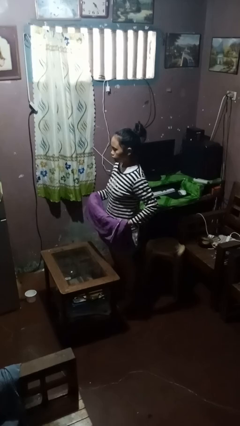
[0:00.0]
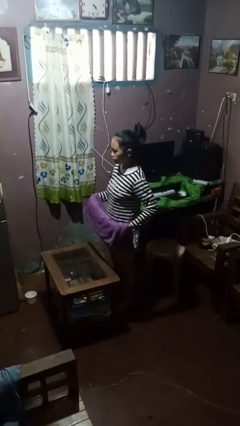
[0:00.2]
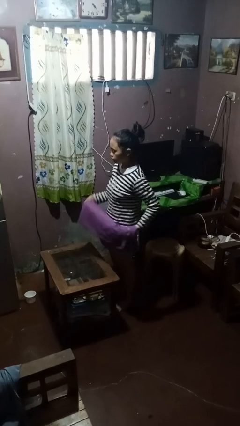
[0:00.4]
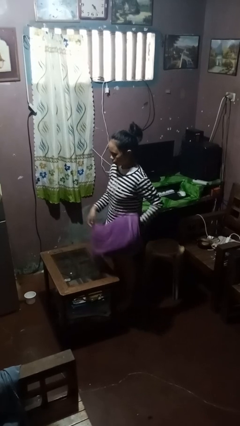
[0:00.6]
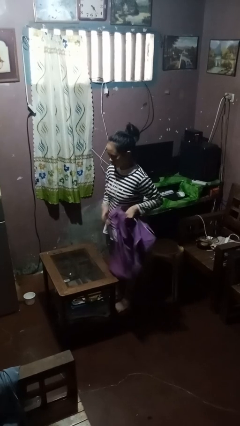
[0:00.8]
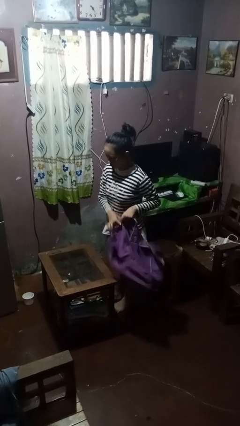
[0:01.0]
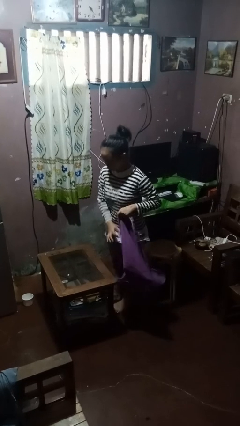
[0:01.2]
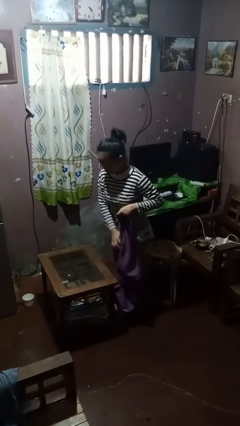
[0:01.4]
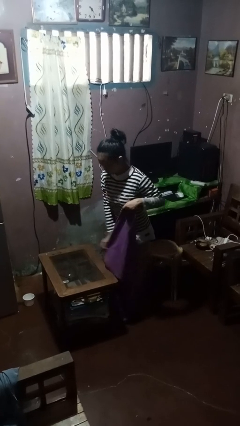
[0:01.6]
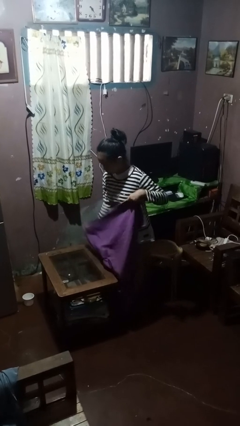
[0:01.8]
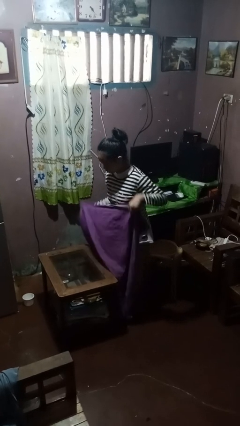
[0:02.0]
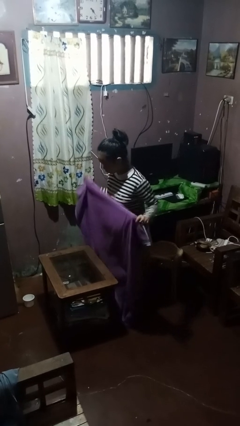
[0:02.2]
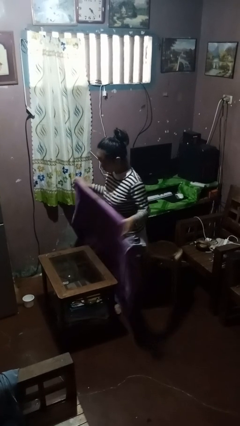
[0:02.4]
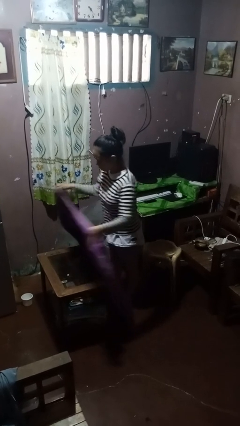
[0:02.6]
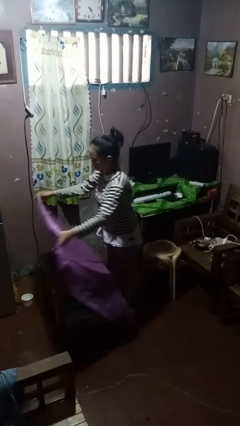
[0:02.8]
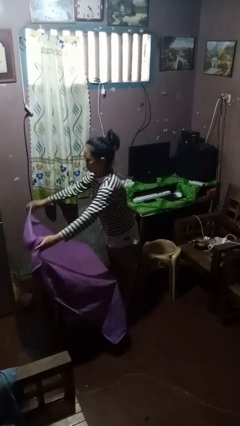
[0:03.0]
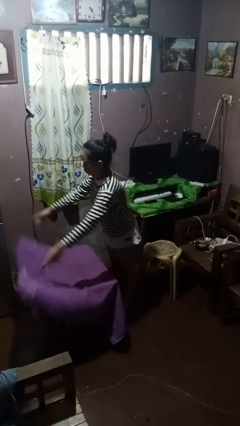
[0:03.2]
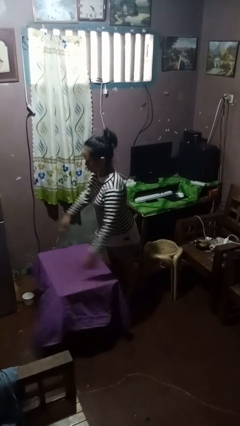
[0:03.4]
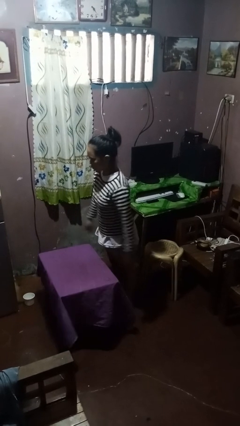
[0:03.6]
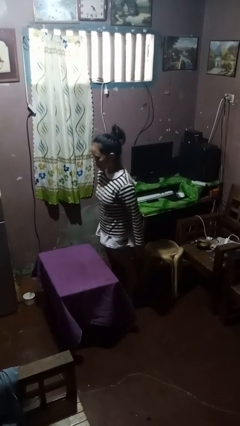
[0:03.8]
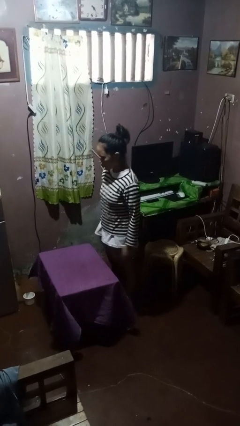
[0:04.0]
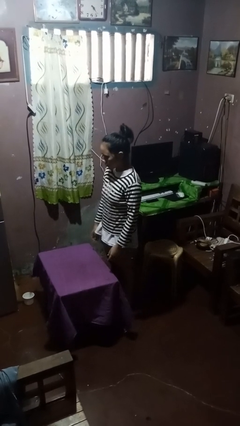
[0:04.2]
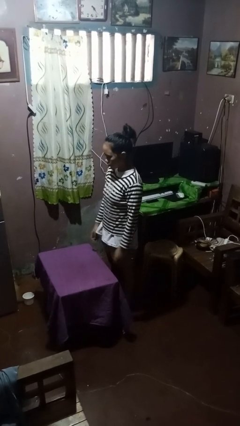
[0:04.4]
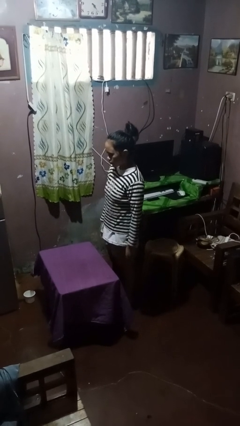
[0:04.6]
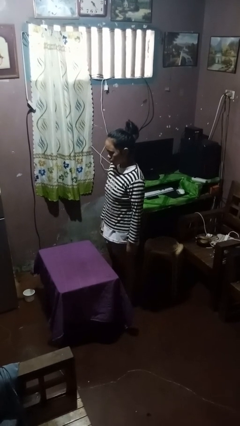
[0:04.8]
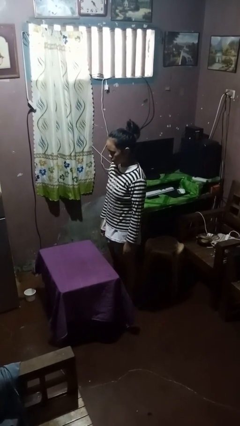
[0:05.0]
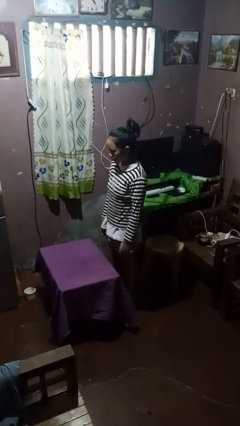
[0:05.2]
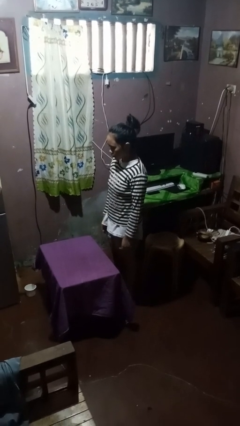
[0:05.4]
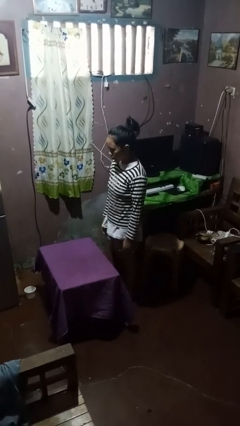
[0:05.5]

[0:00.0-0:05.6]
person spreads tablecloth

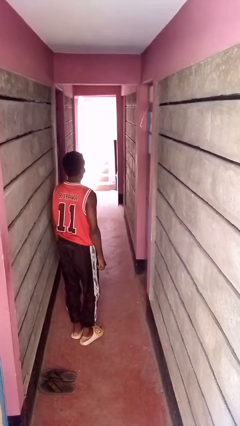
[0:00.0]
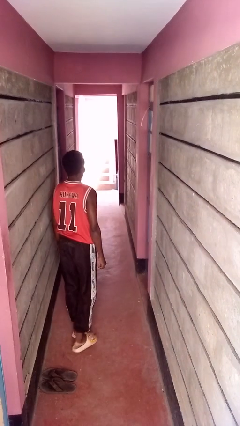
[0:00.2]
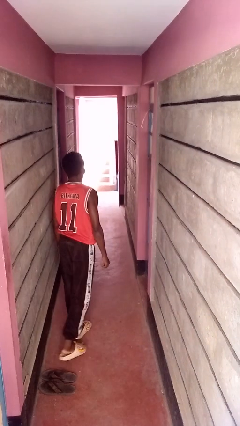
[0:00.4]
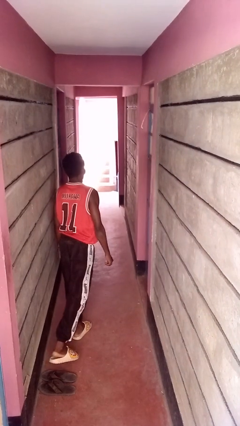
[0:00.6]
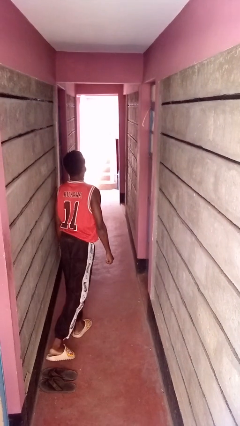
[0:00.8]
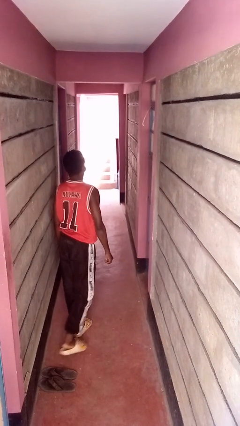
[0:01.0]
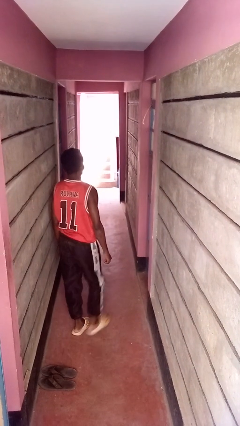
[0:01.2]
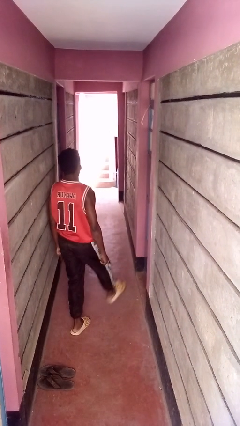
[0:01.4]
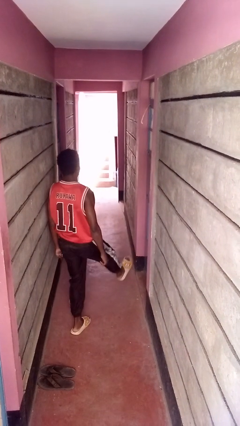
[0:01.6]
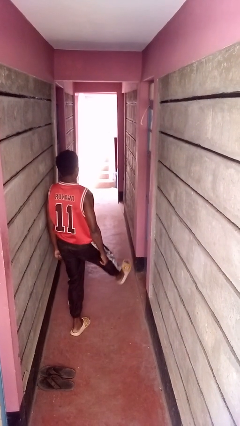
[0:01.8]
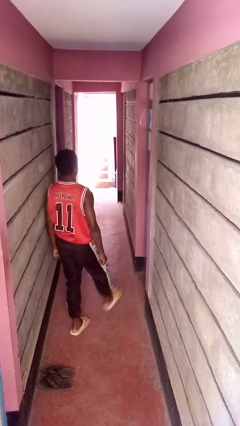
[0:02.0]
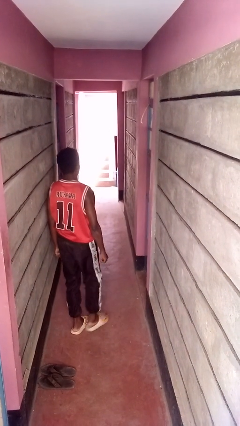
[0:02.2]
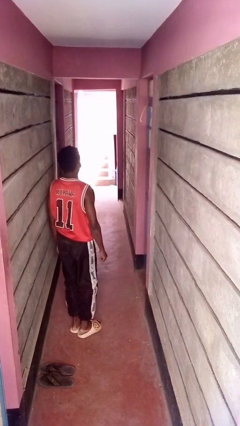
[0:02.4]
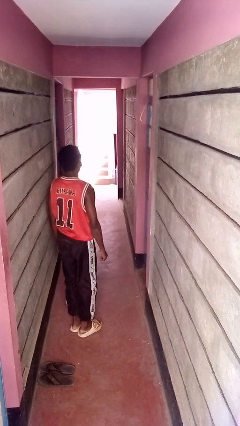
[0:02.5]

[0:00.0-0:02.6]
person wiggles hips

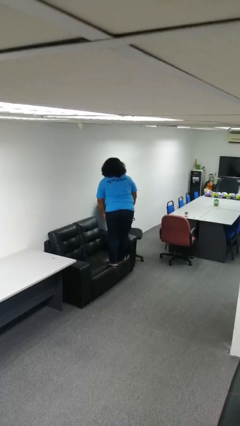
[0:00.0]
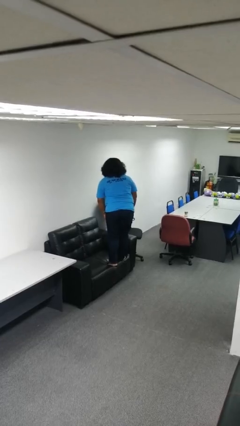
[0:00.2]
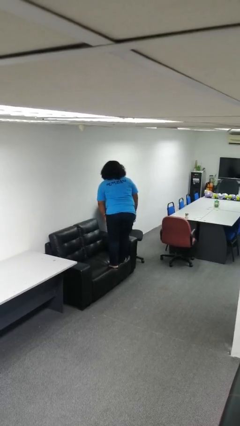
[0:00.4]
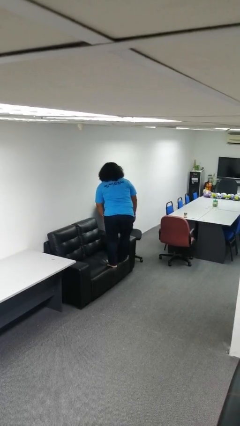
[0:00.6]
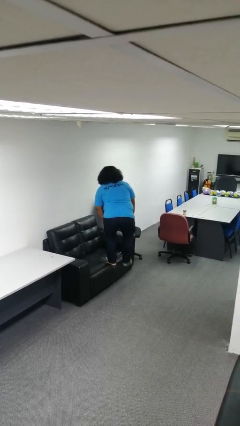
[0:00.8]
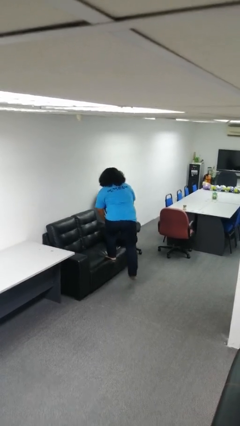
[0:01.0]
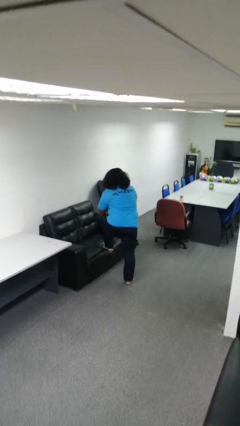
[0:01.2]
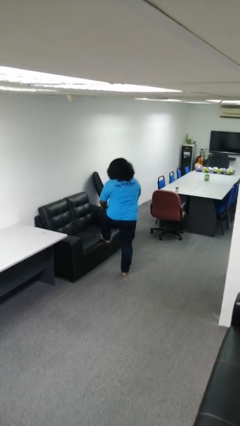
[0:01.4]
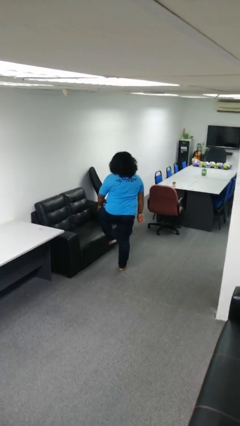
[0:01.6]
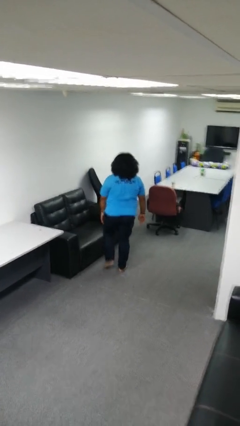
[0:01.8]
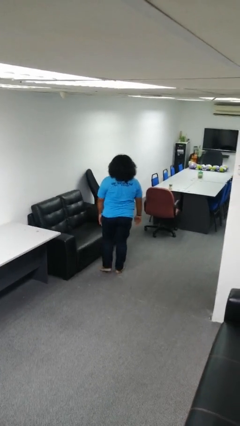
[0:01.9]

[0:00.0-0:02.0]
person climbs off couch

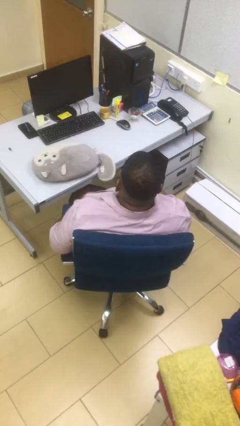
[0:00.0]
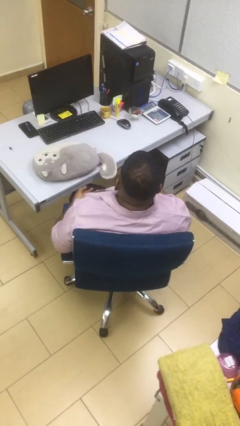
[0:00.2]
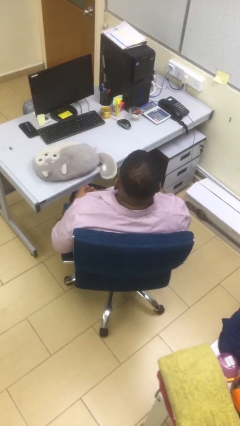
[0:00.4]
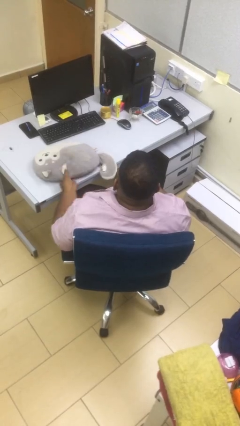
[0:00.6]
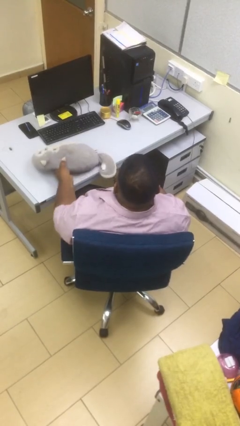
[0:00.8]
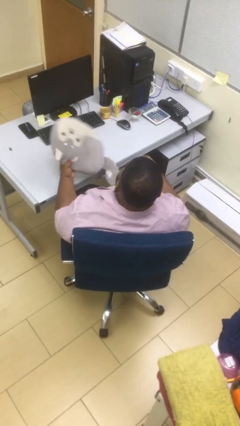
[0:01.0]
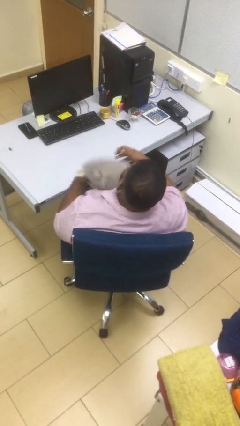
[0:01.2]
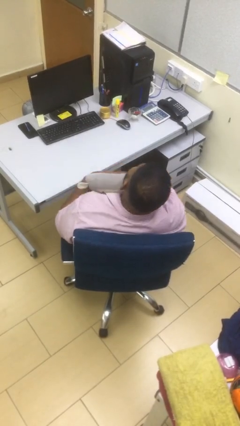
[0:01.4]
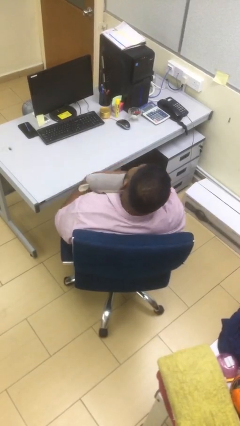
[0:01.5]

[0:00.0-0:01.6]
person hugs stuffed animal

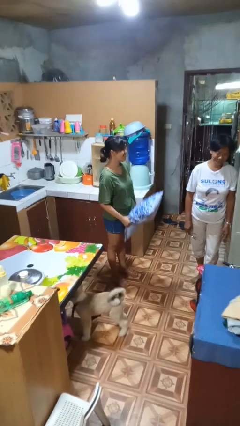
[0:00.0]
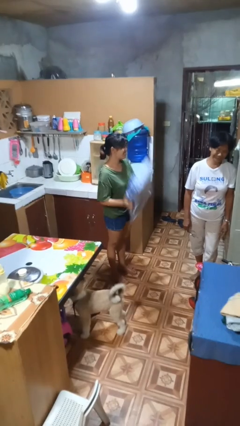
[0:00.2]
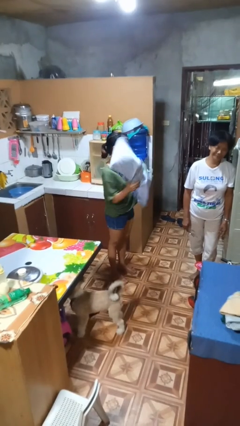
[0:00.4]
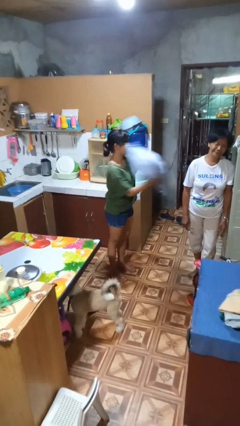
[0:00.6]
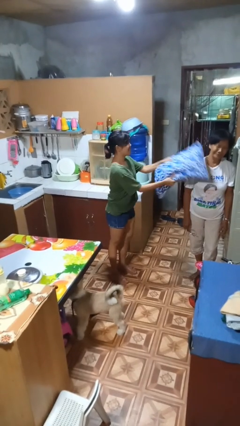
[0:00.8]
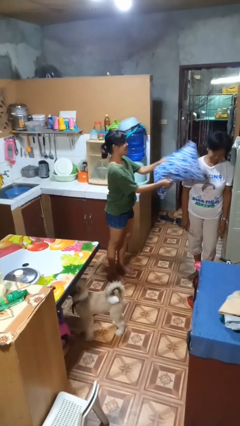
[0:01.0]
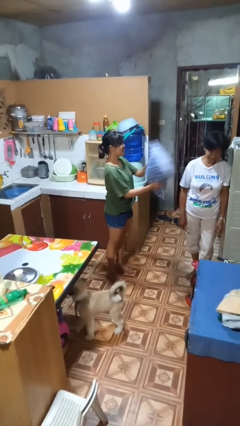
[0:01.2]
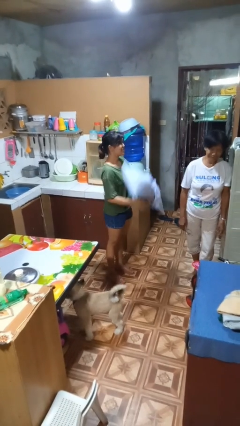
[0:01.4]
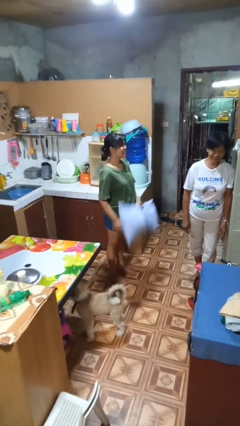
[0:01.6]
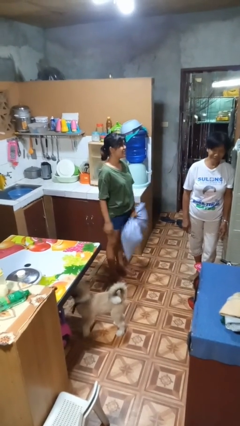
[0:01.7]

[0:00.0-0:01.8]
person hits person with pillow

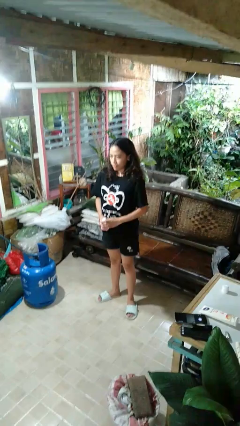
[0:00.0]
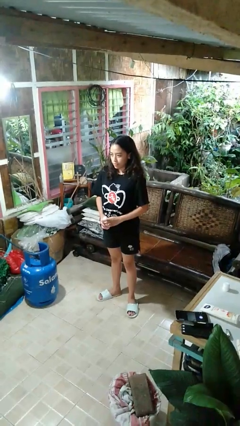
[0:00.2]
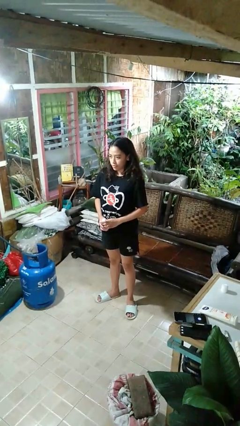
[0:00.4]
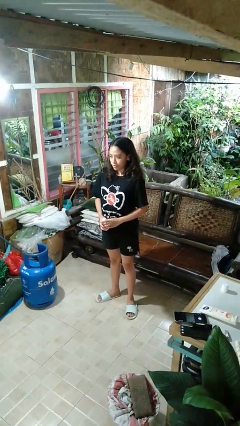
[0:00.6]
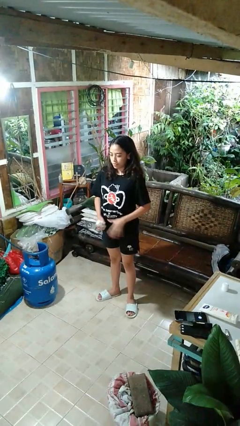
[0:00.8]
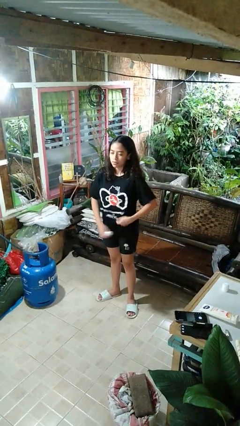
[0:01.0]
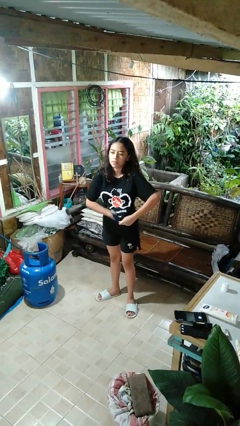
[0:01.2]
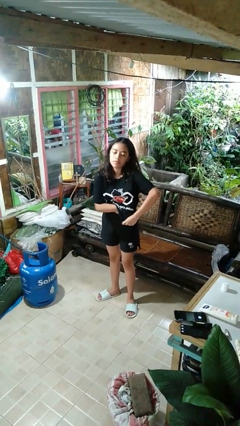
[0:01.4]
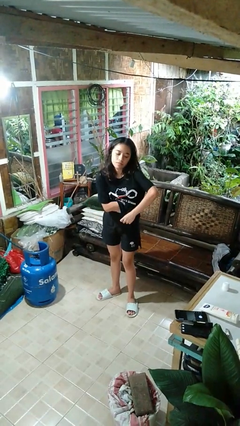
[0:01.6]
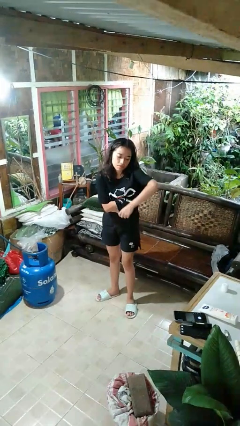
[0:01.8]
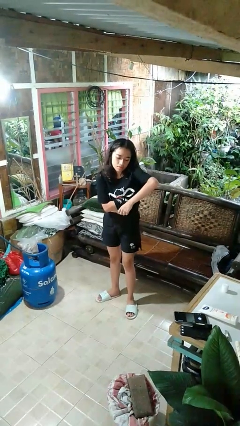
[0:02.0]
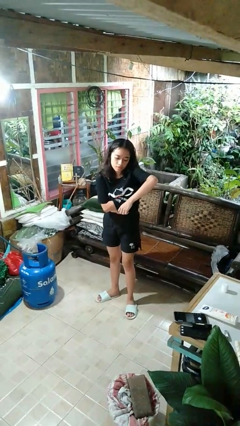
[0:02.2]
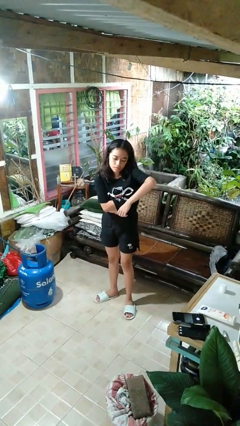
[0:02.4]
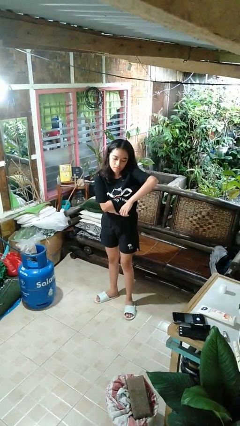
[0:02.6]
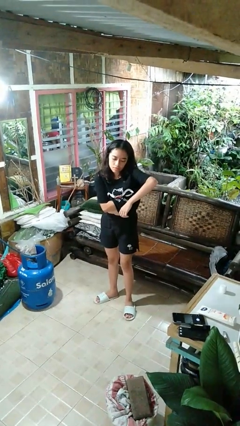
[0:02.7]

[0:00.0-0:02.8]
person applies deodorant

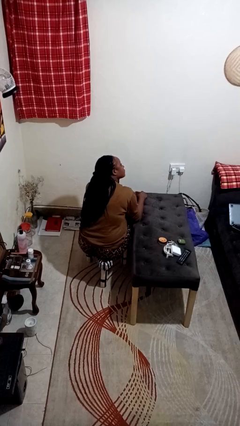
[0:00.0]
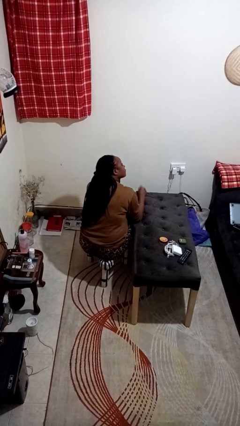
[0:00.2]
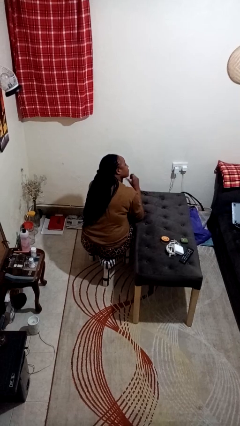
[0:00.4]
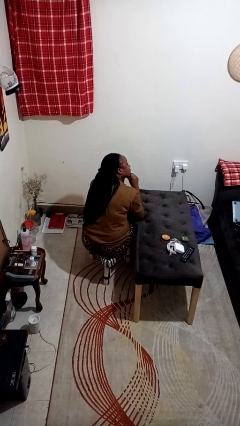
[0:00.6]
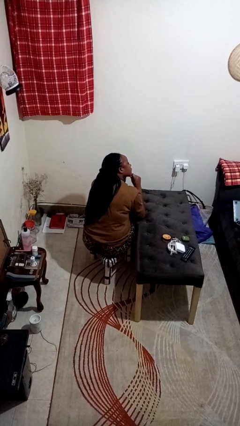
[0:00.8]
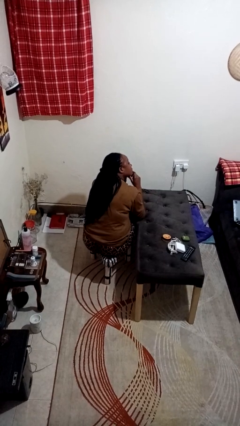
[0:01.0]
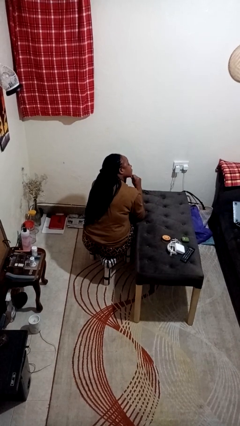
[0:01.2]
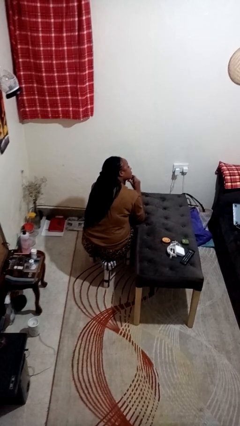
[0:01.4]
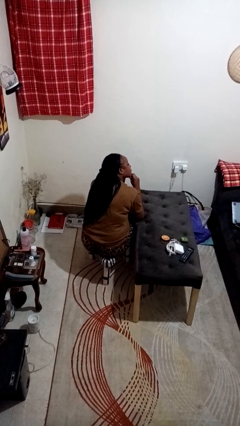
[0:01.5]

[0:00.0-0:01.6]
person strokes chin
